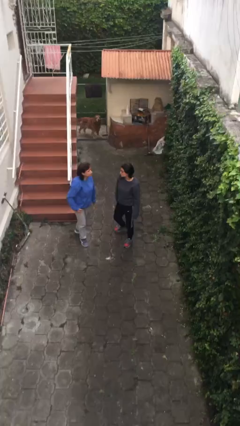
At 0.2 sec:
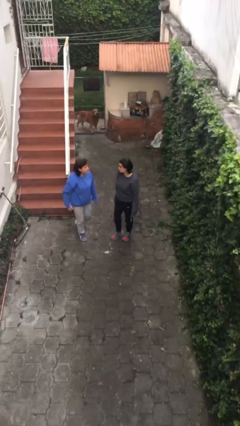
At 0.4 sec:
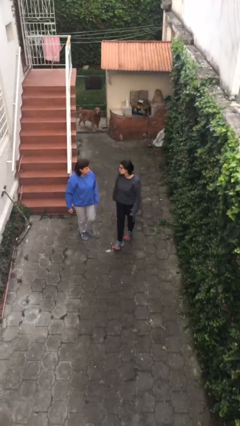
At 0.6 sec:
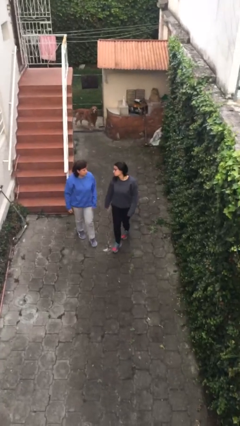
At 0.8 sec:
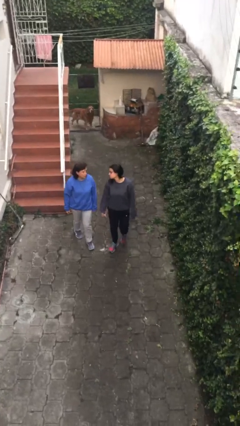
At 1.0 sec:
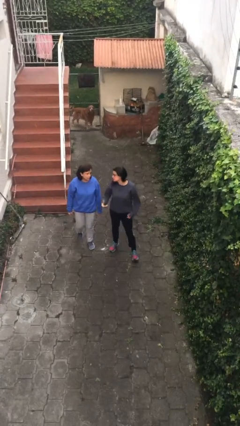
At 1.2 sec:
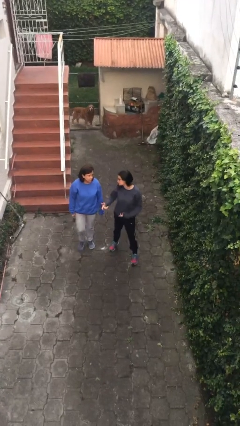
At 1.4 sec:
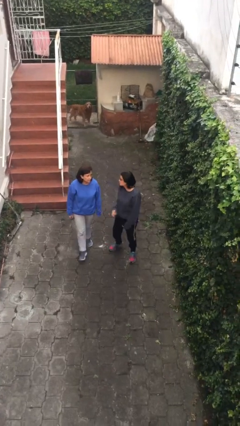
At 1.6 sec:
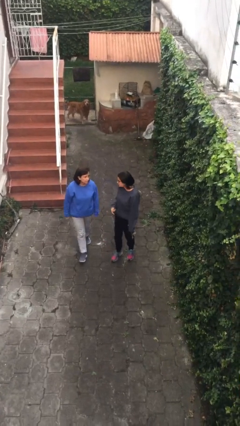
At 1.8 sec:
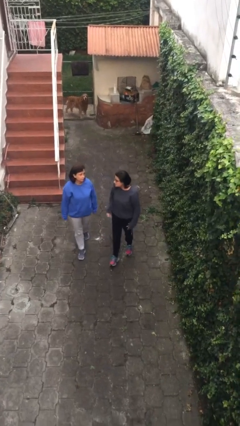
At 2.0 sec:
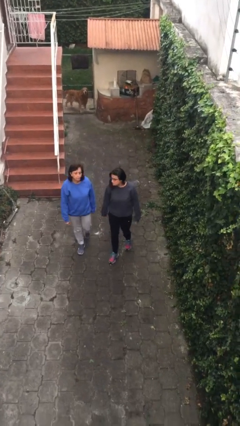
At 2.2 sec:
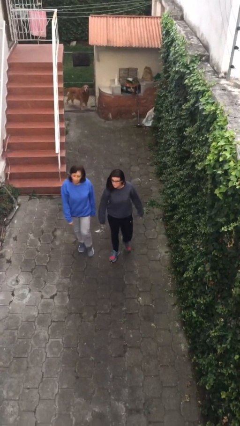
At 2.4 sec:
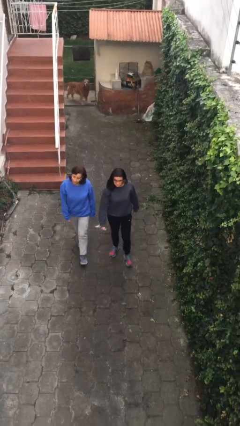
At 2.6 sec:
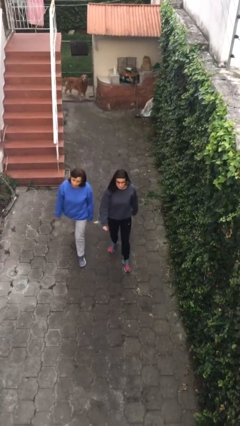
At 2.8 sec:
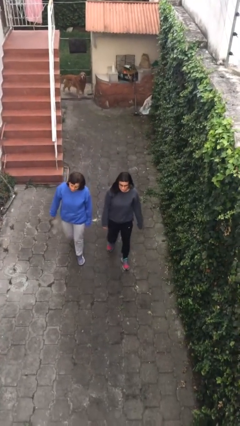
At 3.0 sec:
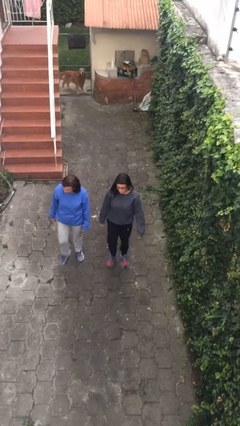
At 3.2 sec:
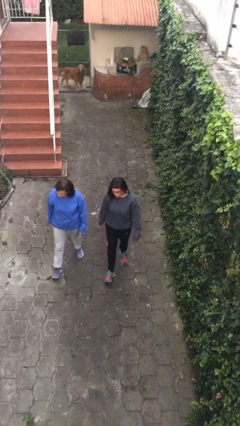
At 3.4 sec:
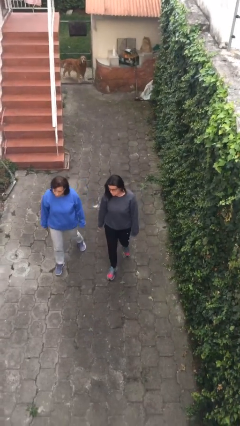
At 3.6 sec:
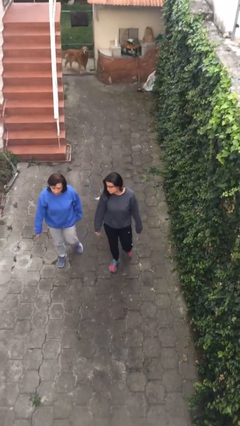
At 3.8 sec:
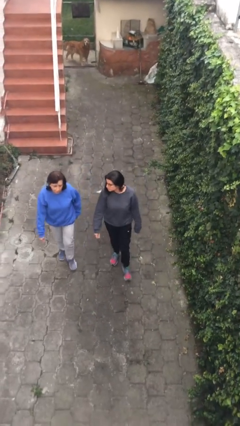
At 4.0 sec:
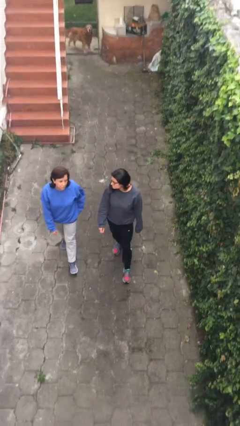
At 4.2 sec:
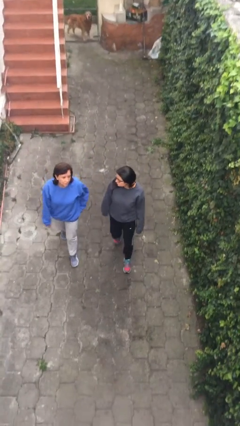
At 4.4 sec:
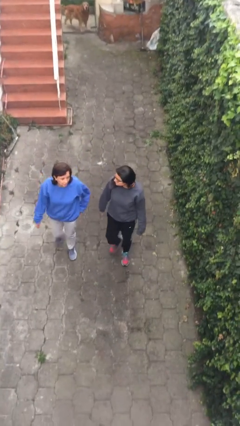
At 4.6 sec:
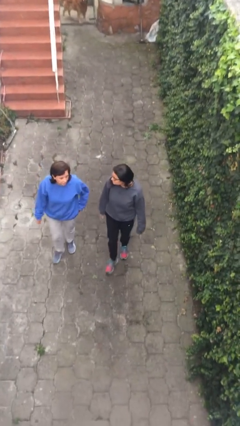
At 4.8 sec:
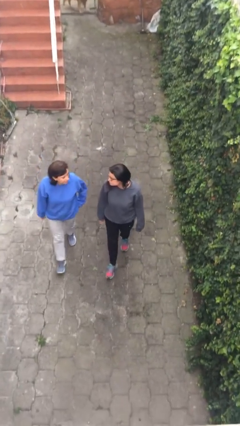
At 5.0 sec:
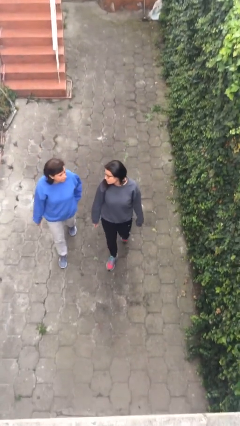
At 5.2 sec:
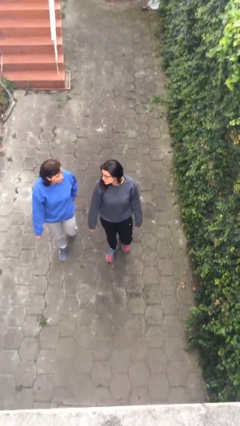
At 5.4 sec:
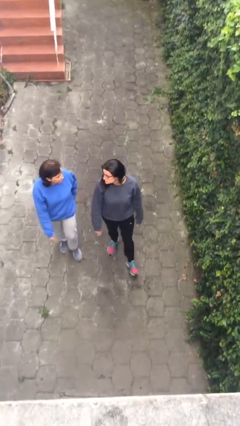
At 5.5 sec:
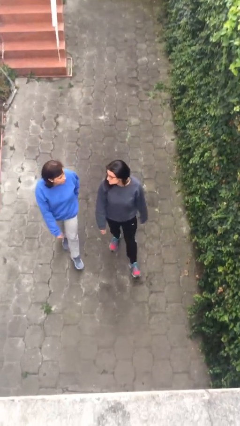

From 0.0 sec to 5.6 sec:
person talks to person

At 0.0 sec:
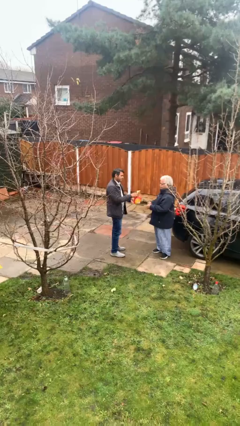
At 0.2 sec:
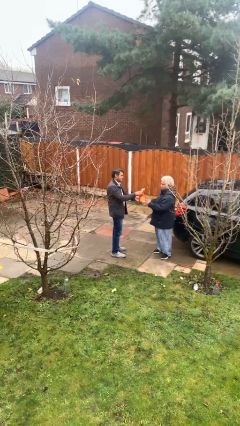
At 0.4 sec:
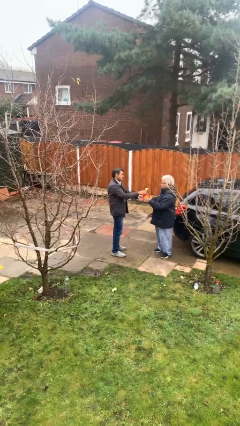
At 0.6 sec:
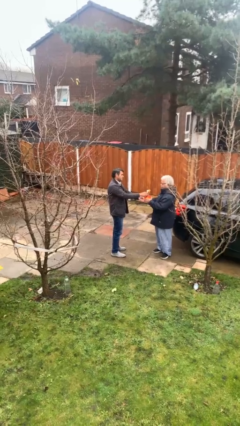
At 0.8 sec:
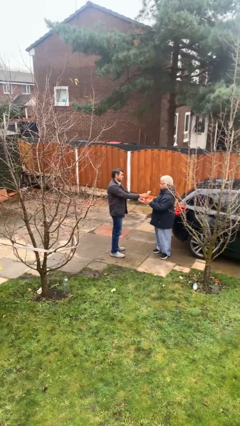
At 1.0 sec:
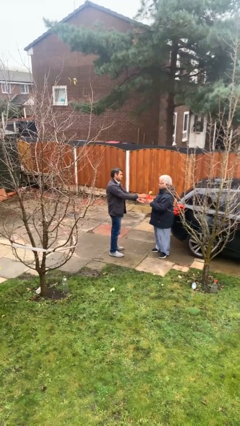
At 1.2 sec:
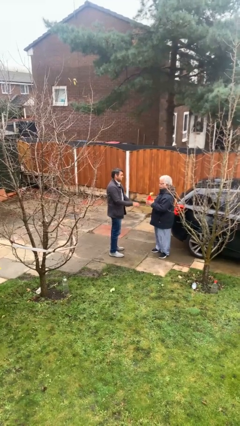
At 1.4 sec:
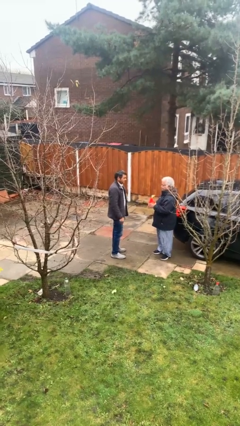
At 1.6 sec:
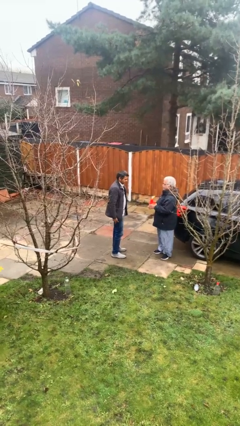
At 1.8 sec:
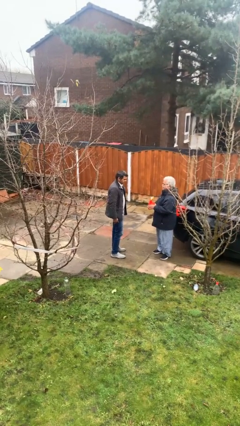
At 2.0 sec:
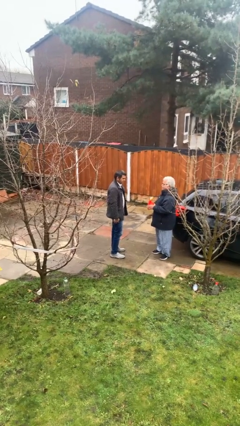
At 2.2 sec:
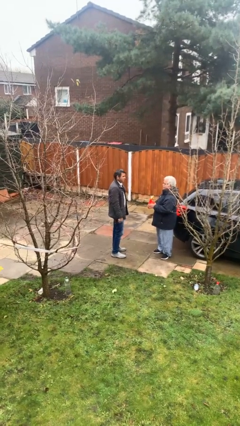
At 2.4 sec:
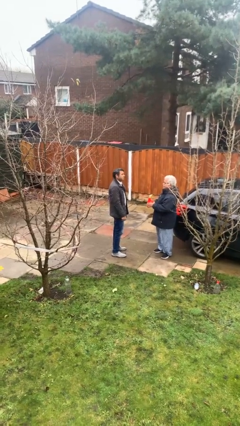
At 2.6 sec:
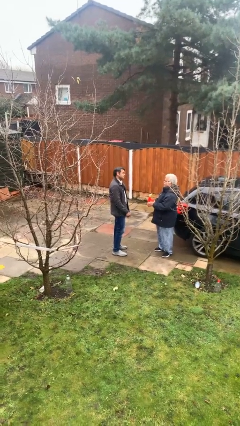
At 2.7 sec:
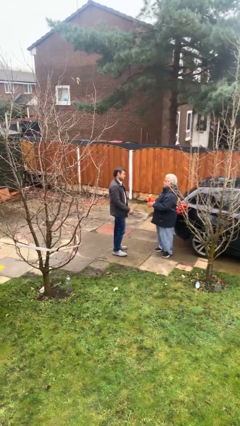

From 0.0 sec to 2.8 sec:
person transfers object to person

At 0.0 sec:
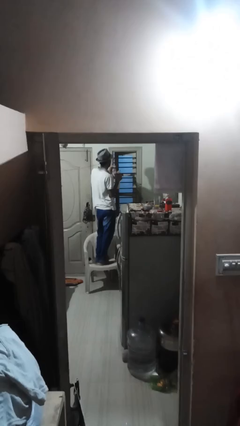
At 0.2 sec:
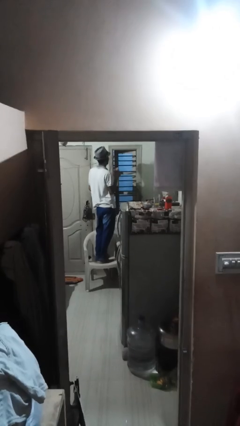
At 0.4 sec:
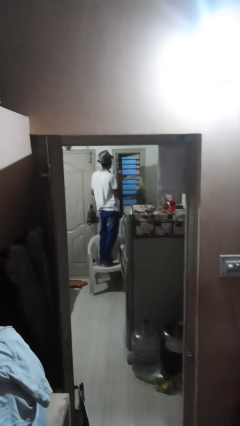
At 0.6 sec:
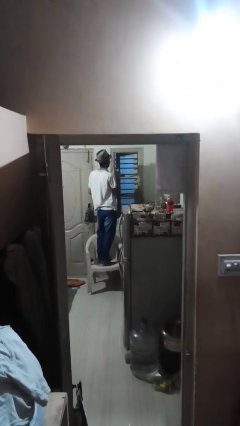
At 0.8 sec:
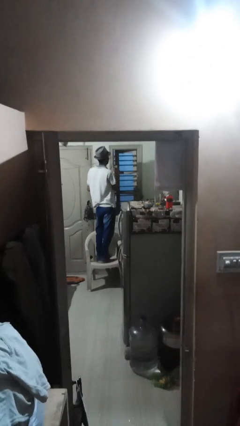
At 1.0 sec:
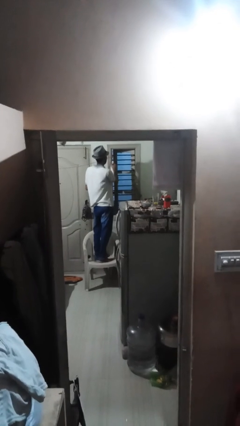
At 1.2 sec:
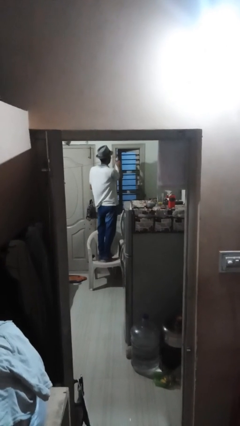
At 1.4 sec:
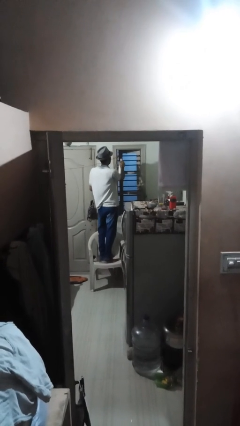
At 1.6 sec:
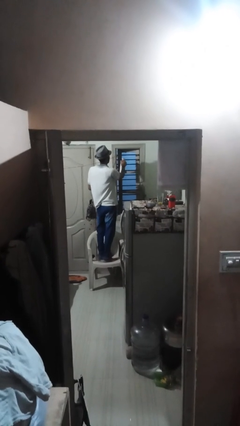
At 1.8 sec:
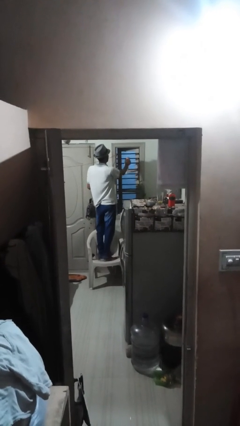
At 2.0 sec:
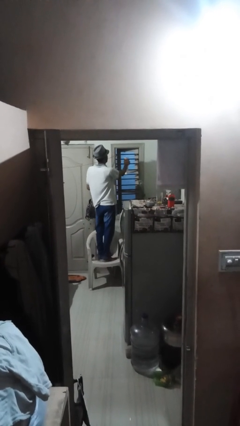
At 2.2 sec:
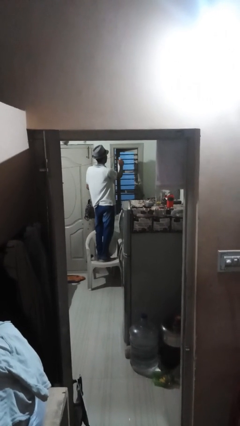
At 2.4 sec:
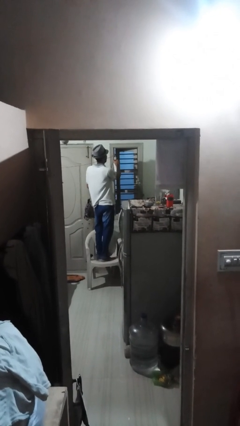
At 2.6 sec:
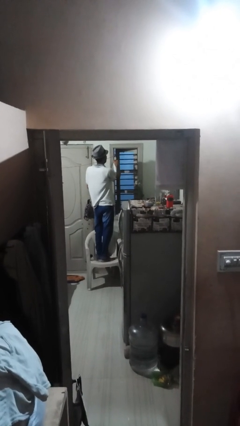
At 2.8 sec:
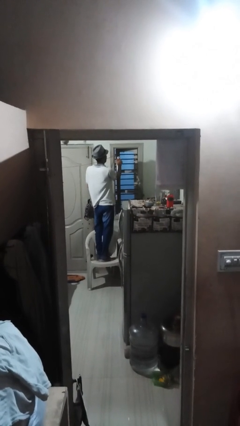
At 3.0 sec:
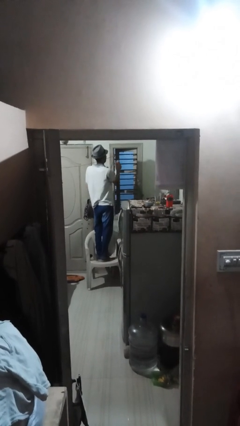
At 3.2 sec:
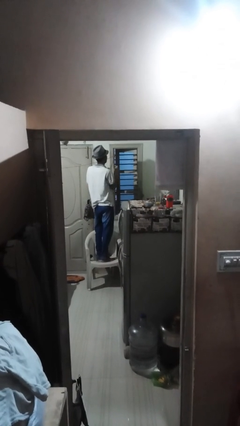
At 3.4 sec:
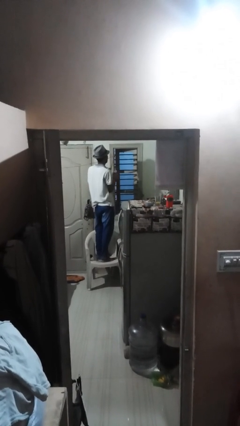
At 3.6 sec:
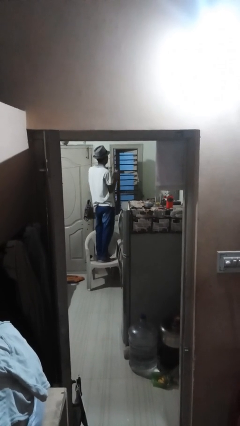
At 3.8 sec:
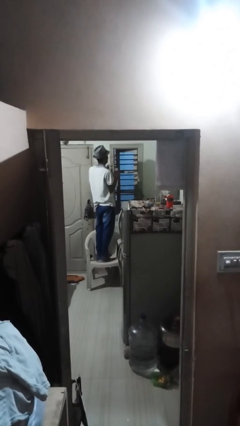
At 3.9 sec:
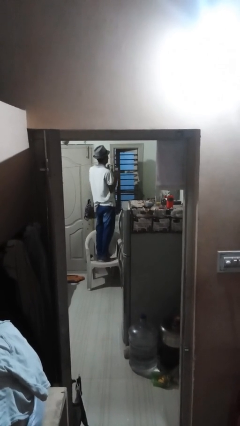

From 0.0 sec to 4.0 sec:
person sprays from bottle

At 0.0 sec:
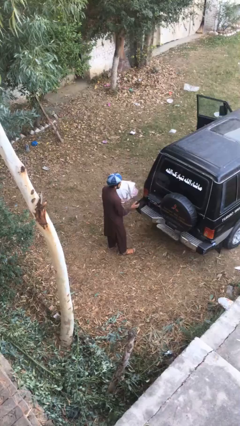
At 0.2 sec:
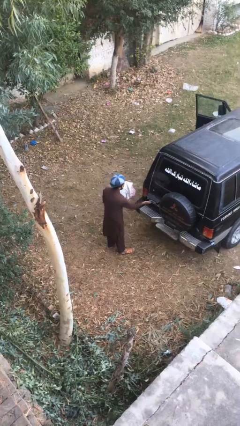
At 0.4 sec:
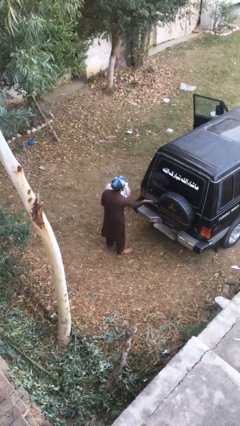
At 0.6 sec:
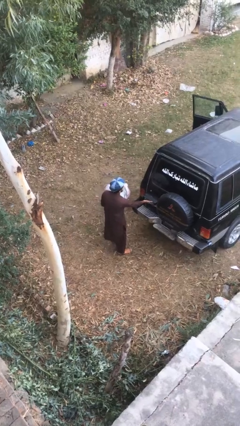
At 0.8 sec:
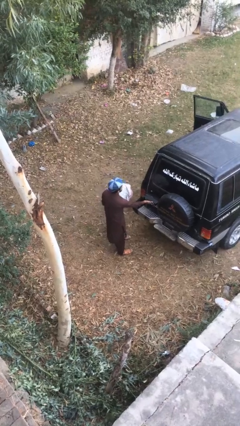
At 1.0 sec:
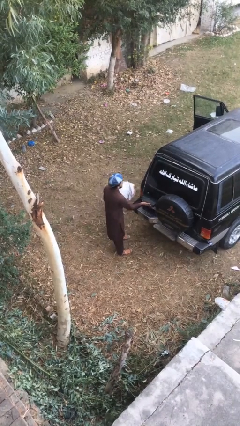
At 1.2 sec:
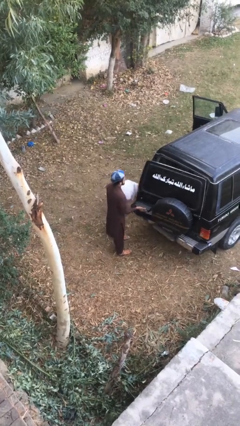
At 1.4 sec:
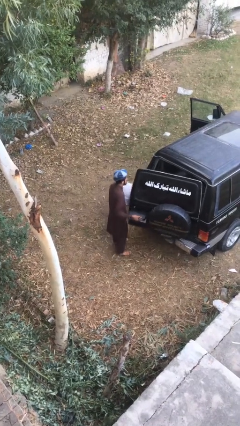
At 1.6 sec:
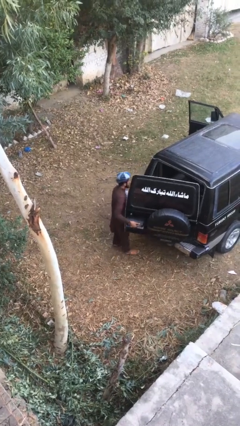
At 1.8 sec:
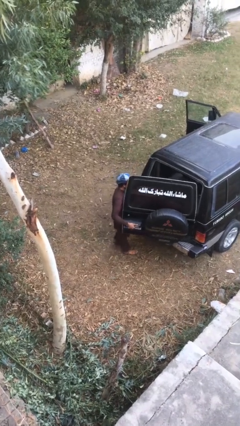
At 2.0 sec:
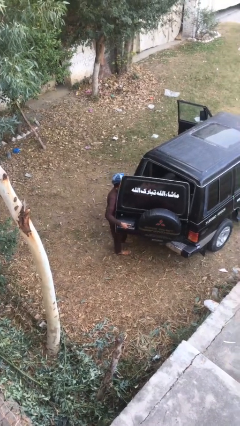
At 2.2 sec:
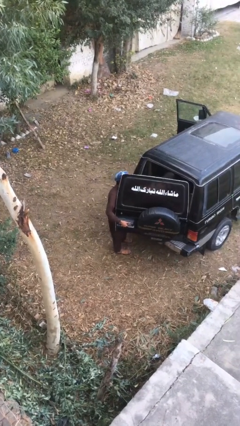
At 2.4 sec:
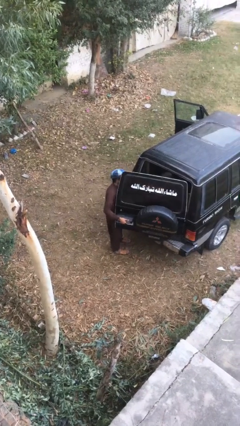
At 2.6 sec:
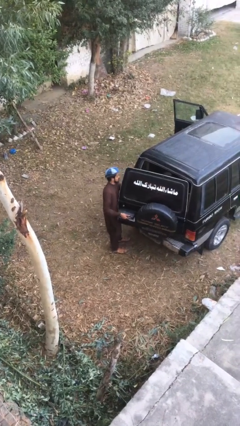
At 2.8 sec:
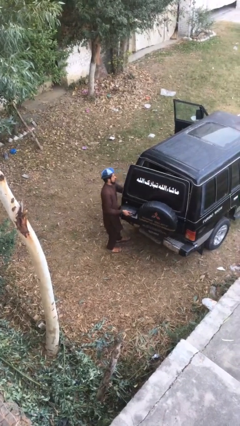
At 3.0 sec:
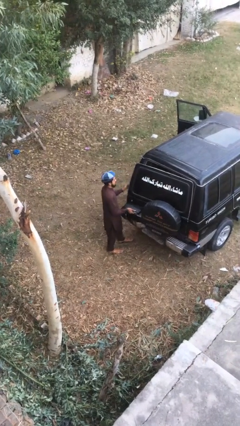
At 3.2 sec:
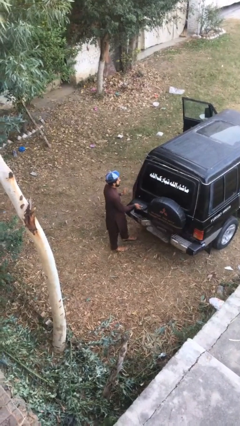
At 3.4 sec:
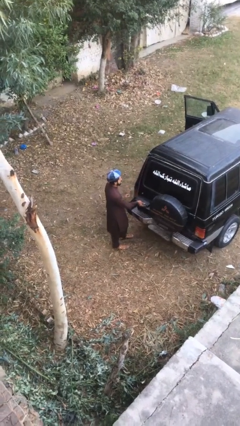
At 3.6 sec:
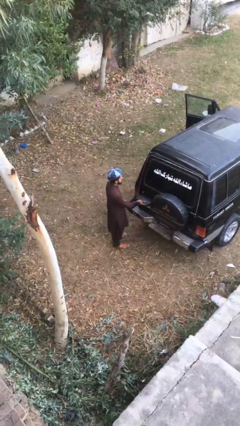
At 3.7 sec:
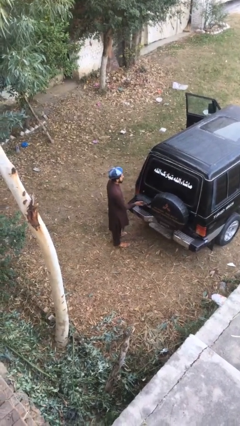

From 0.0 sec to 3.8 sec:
person loads car

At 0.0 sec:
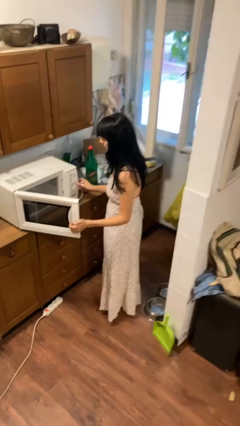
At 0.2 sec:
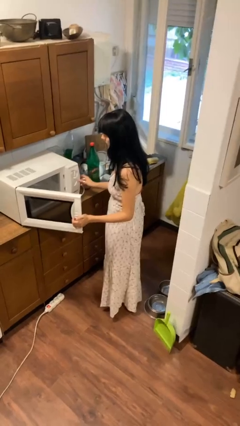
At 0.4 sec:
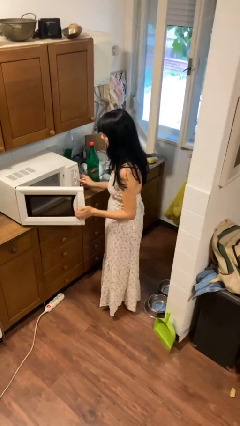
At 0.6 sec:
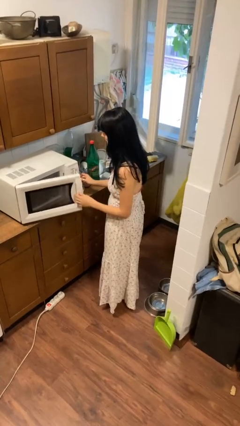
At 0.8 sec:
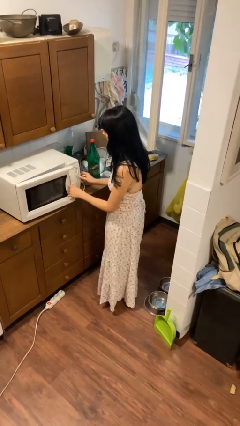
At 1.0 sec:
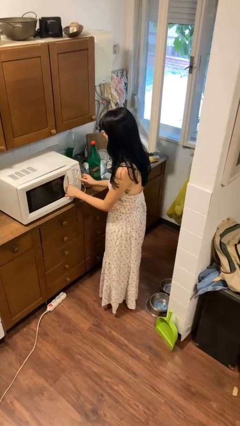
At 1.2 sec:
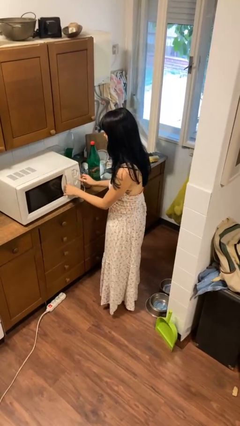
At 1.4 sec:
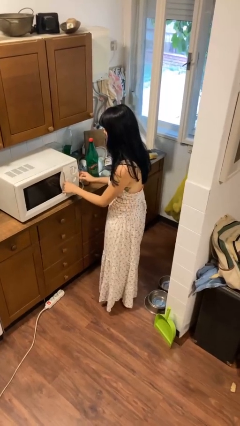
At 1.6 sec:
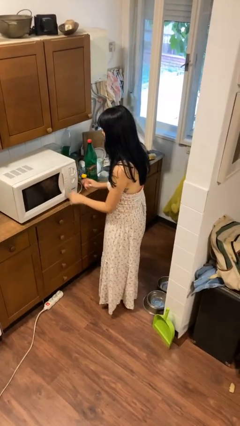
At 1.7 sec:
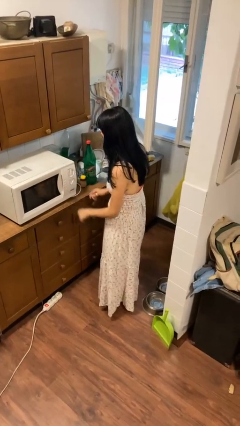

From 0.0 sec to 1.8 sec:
person closes microwave
